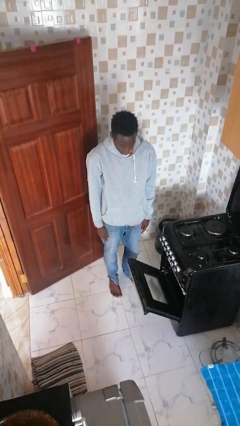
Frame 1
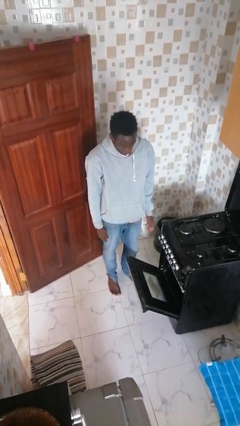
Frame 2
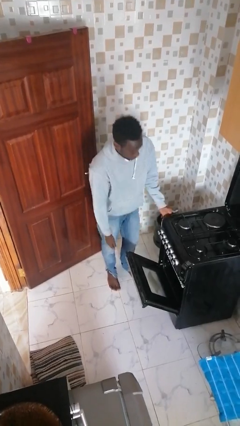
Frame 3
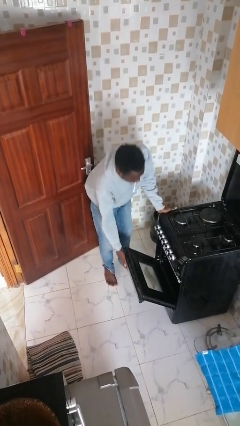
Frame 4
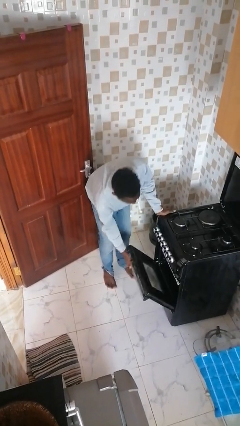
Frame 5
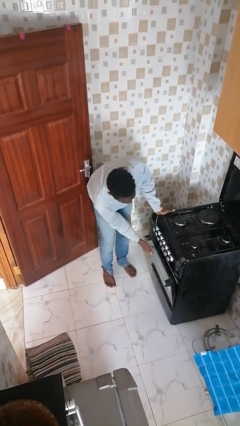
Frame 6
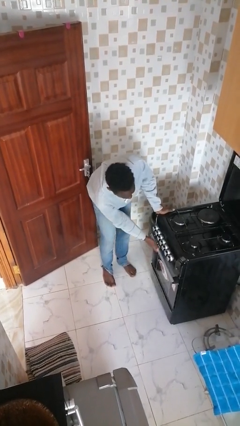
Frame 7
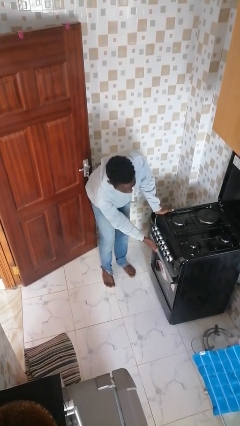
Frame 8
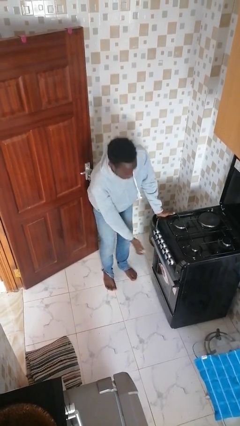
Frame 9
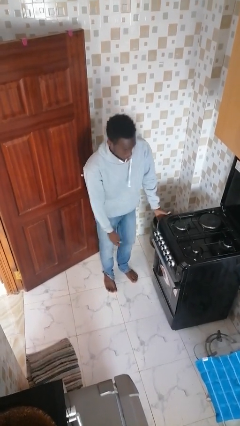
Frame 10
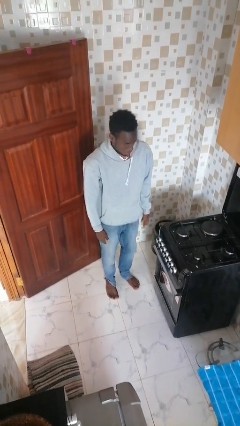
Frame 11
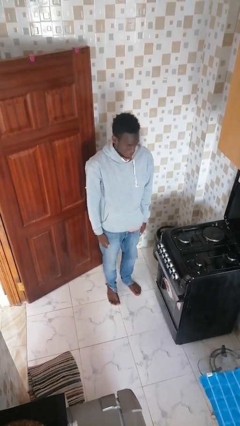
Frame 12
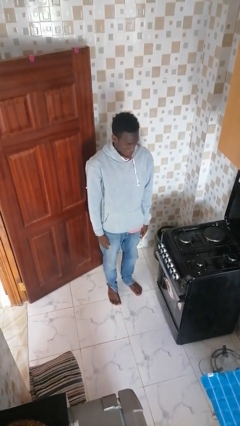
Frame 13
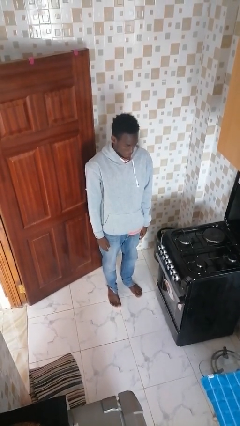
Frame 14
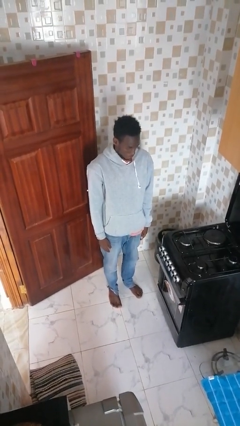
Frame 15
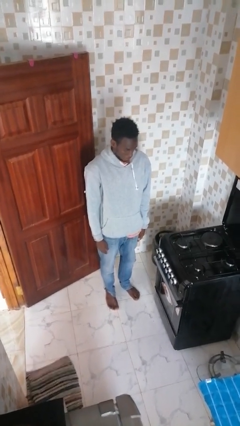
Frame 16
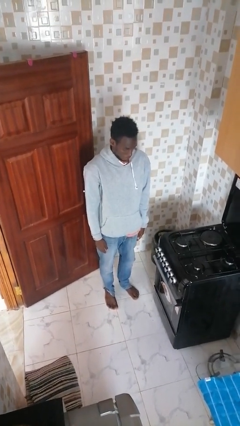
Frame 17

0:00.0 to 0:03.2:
person closes oven door

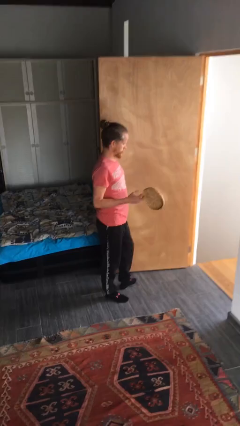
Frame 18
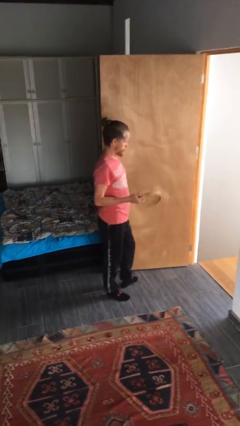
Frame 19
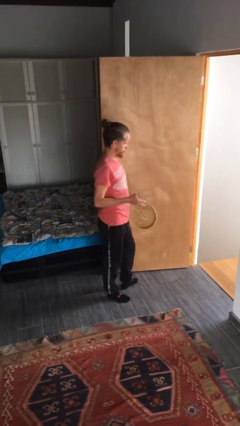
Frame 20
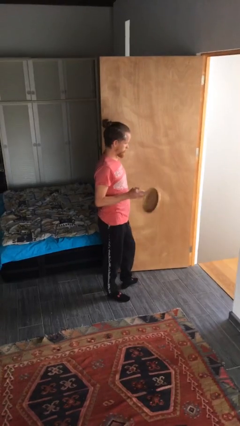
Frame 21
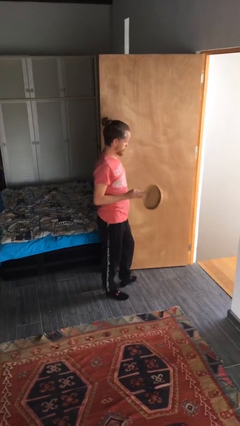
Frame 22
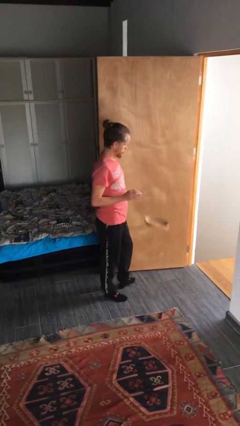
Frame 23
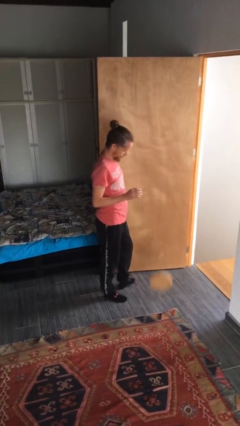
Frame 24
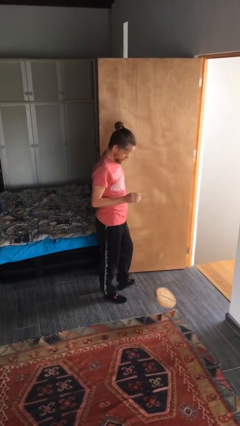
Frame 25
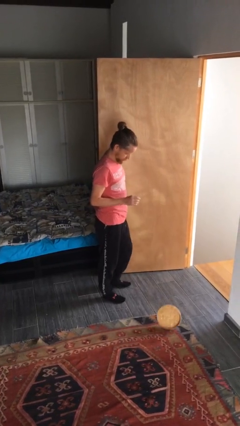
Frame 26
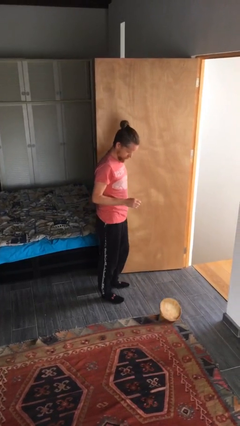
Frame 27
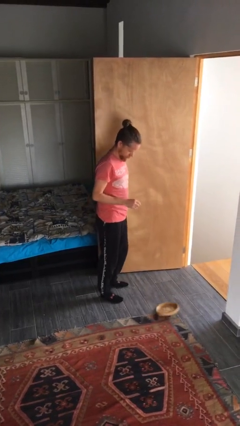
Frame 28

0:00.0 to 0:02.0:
person drops object

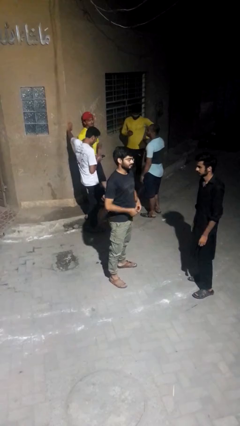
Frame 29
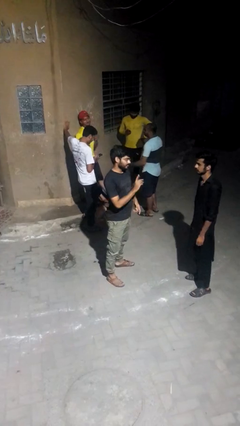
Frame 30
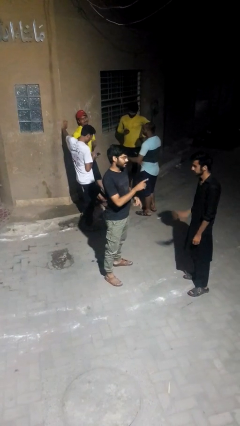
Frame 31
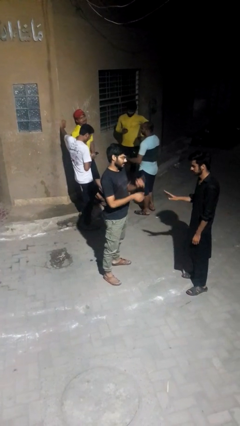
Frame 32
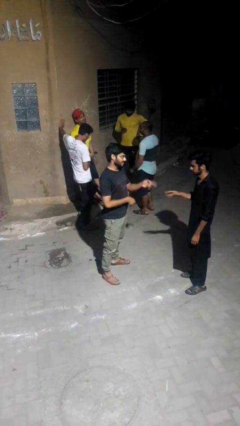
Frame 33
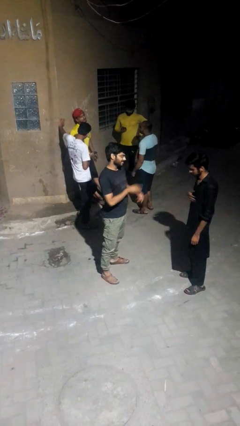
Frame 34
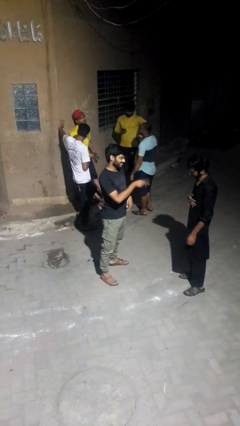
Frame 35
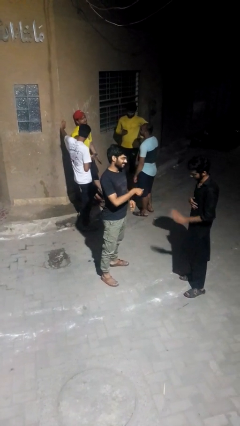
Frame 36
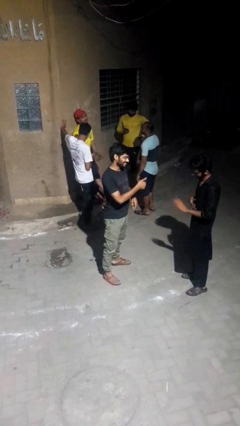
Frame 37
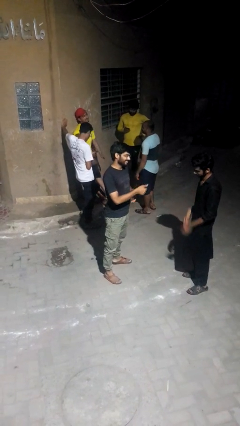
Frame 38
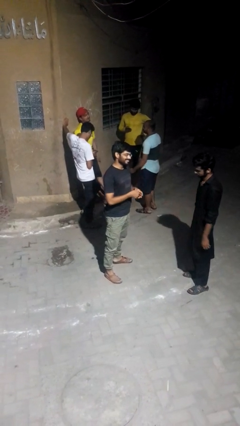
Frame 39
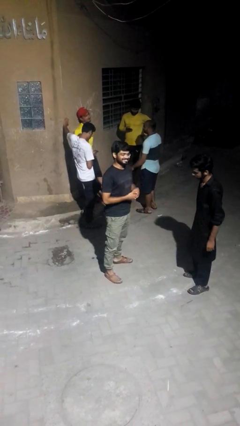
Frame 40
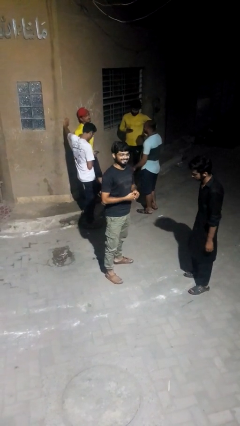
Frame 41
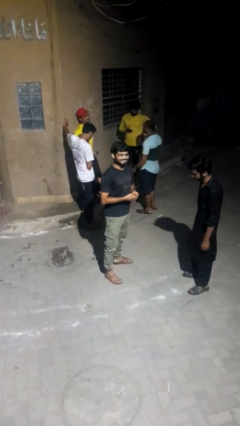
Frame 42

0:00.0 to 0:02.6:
person talks to person

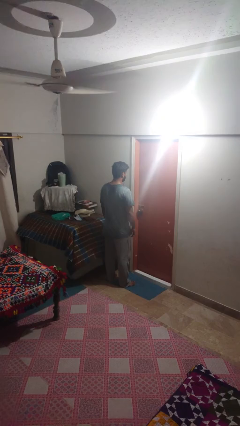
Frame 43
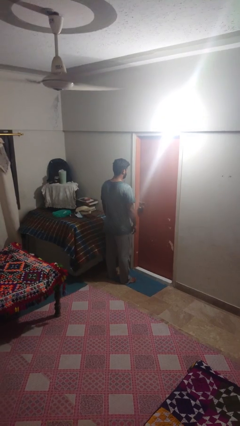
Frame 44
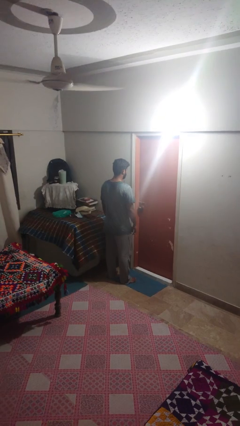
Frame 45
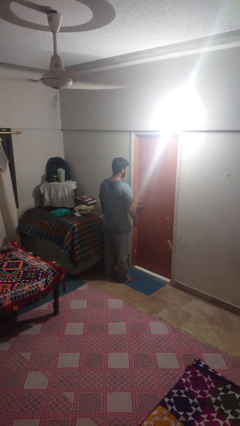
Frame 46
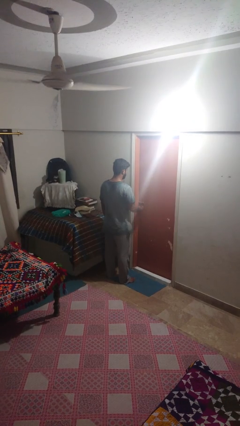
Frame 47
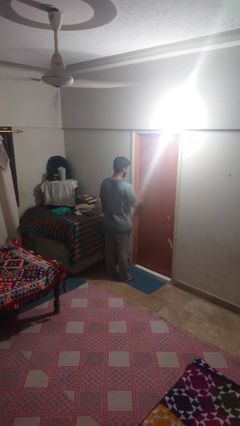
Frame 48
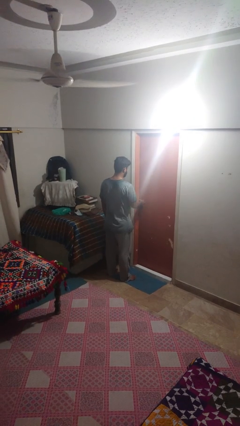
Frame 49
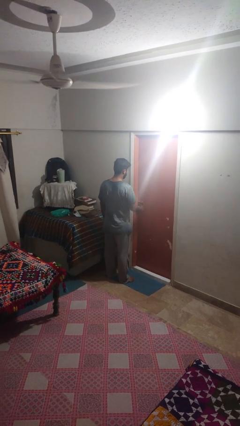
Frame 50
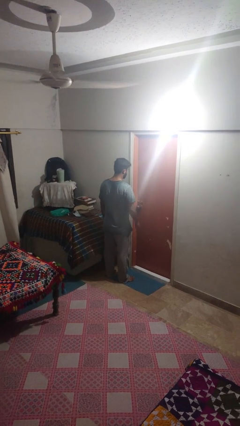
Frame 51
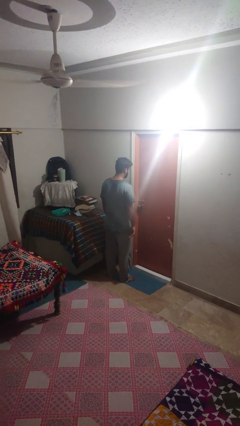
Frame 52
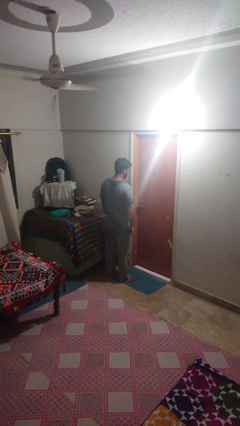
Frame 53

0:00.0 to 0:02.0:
person unlocks door with keys

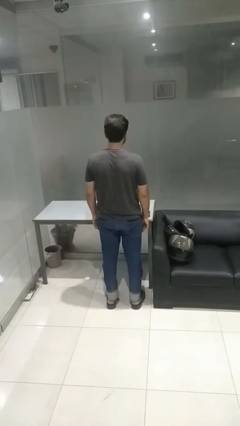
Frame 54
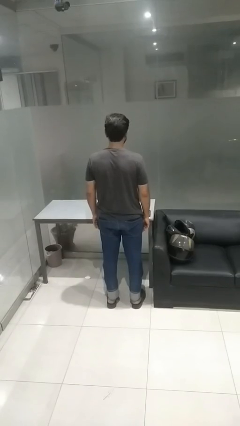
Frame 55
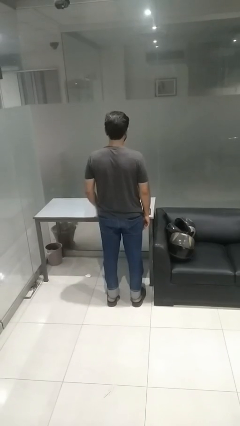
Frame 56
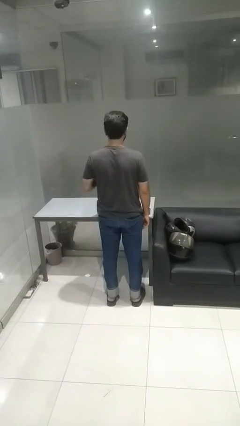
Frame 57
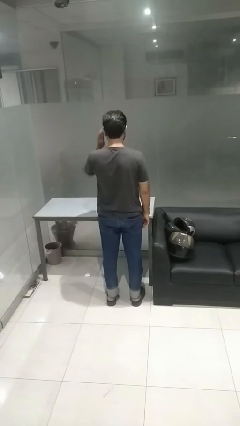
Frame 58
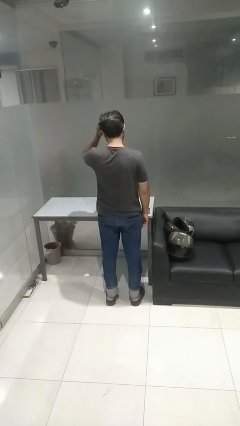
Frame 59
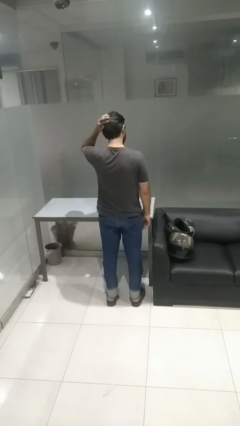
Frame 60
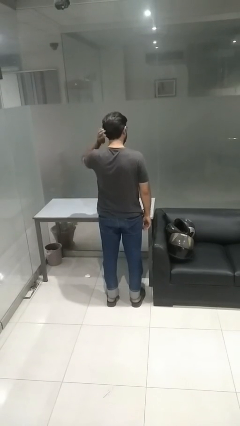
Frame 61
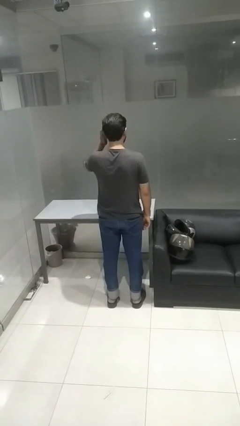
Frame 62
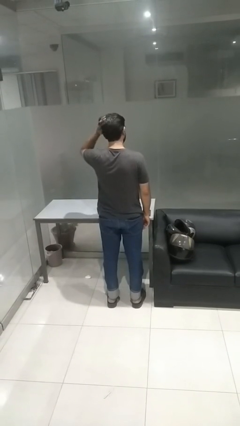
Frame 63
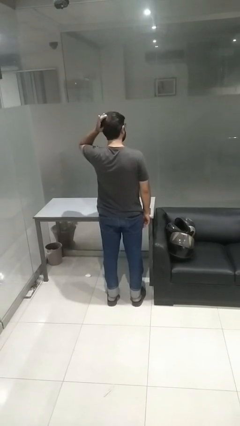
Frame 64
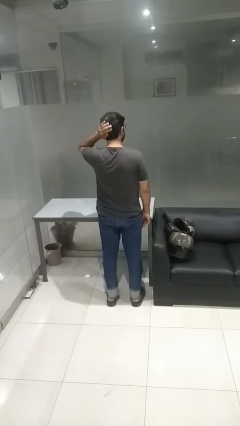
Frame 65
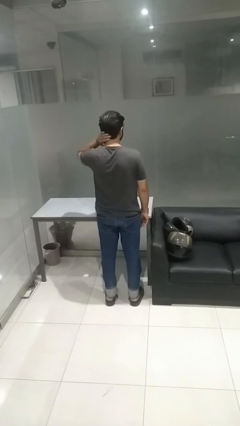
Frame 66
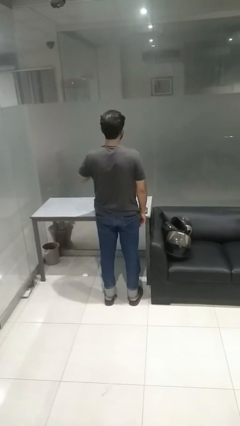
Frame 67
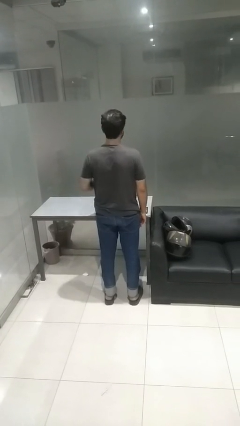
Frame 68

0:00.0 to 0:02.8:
person strokes hair

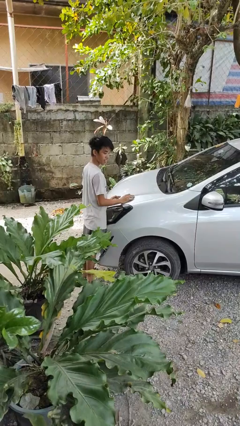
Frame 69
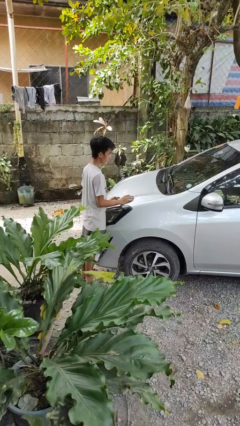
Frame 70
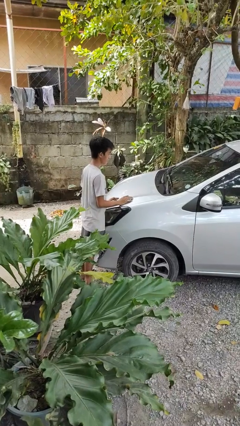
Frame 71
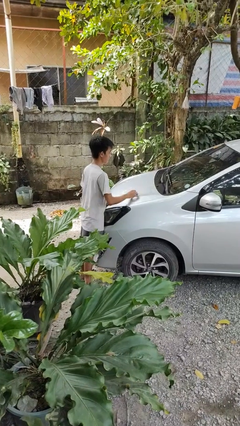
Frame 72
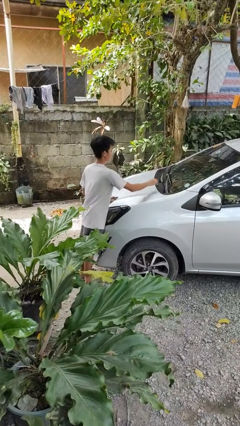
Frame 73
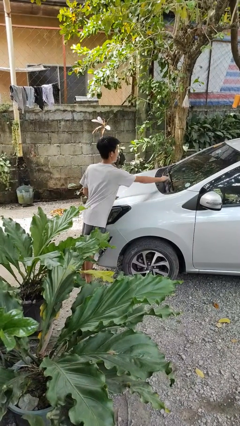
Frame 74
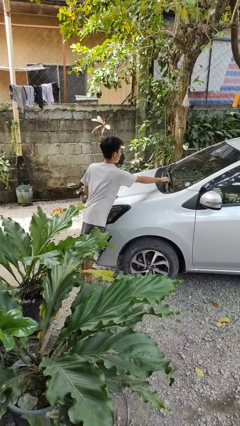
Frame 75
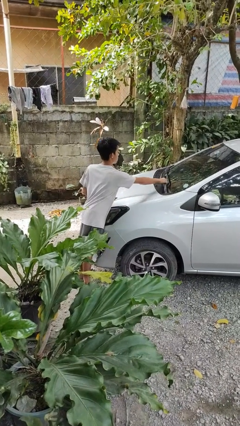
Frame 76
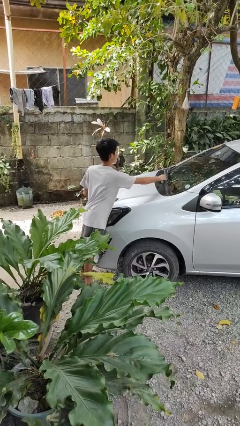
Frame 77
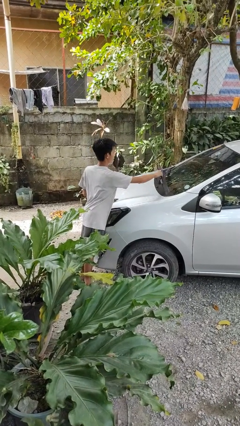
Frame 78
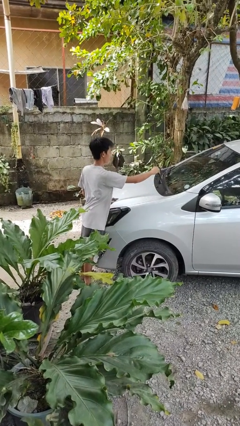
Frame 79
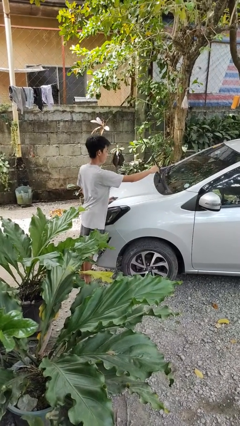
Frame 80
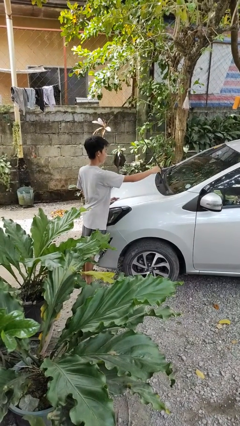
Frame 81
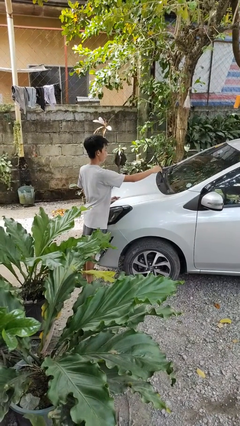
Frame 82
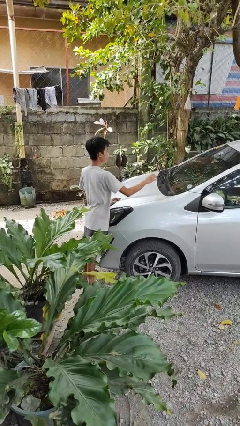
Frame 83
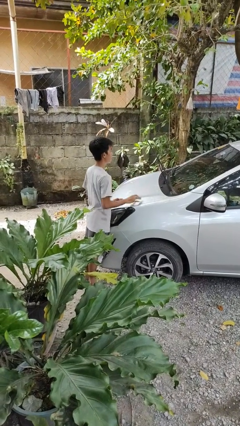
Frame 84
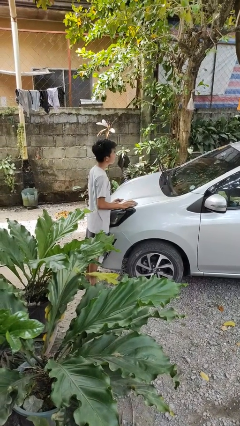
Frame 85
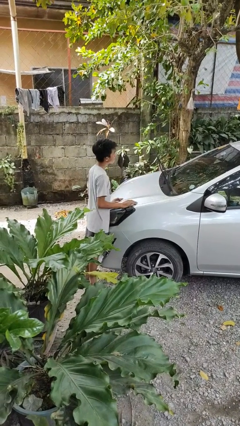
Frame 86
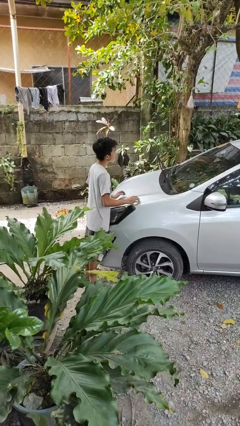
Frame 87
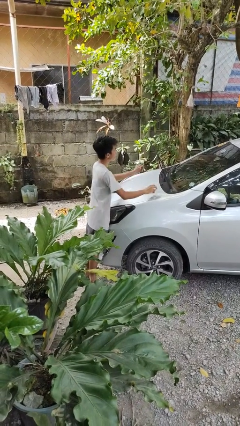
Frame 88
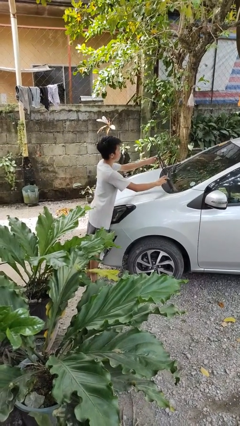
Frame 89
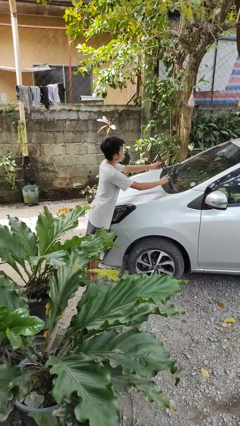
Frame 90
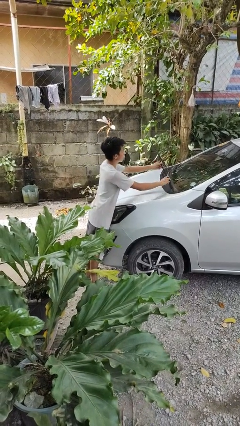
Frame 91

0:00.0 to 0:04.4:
person flips up car wipers

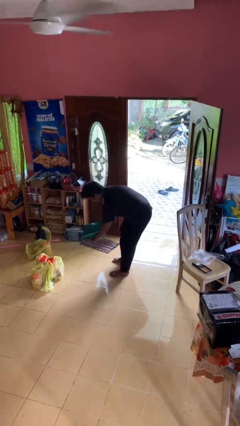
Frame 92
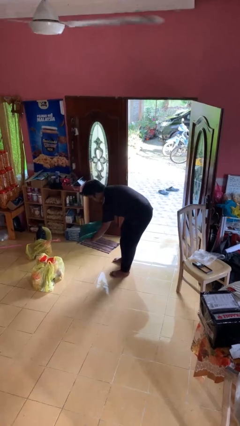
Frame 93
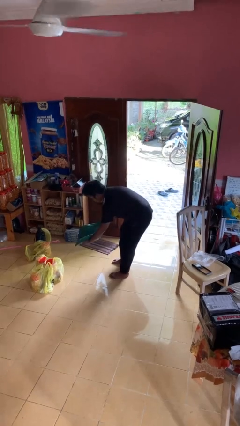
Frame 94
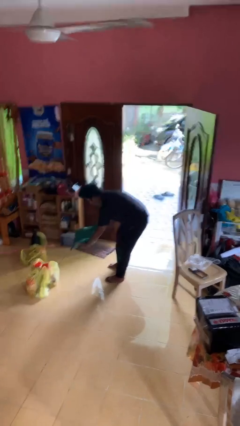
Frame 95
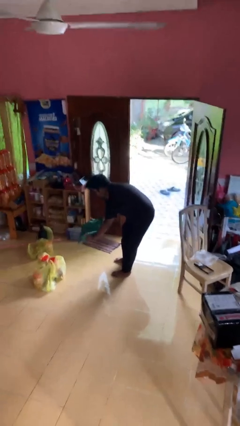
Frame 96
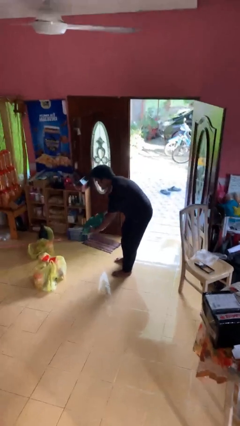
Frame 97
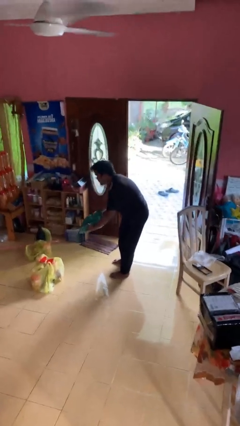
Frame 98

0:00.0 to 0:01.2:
person catches dropped object
